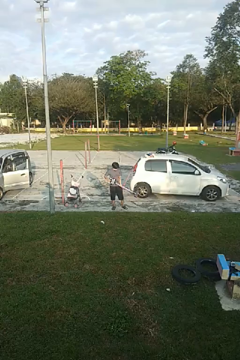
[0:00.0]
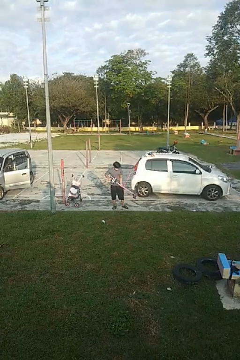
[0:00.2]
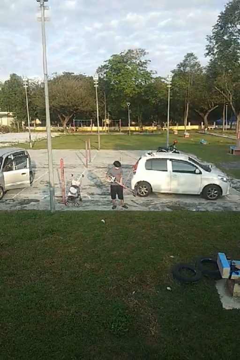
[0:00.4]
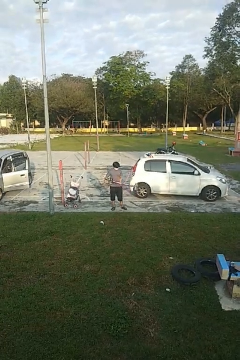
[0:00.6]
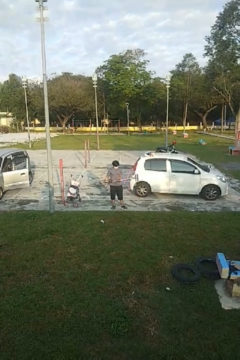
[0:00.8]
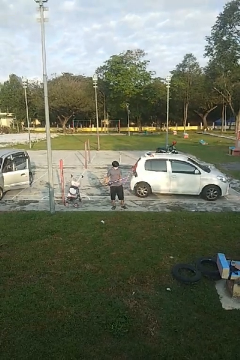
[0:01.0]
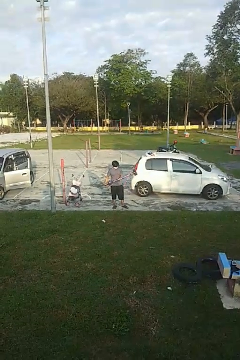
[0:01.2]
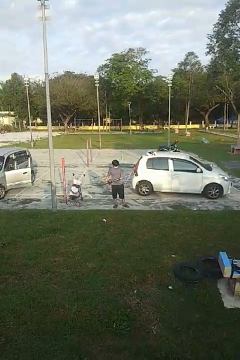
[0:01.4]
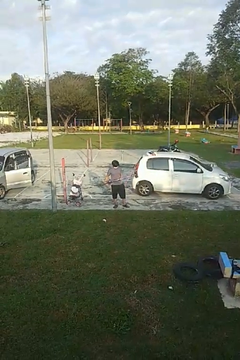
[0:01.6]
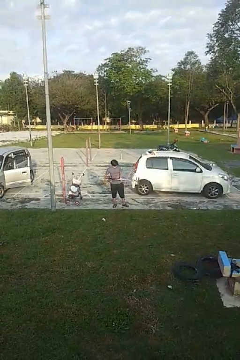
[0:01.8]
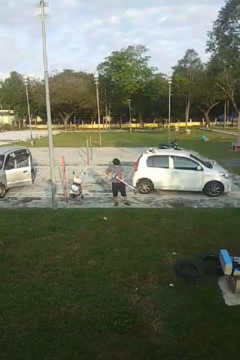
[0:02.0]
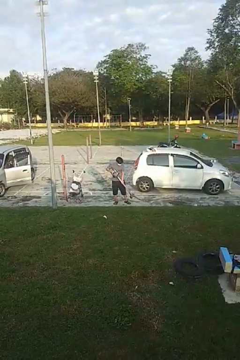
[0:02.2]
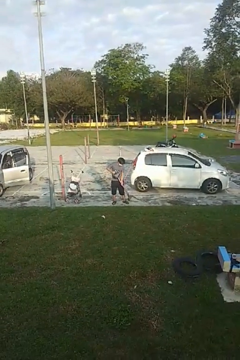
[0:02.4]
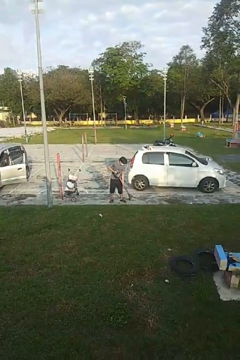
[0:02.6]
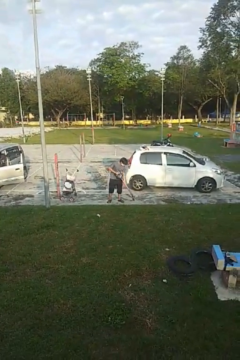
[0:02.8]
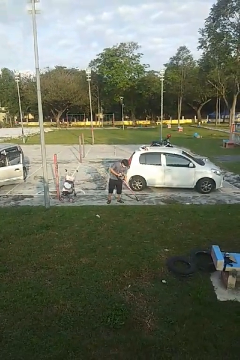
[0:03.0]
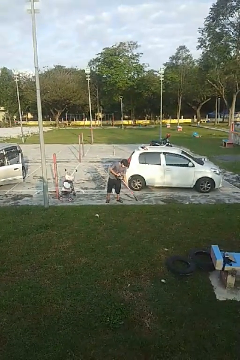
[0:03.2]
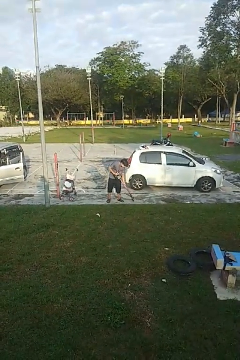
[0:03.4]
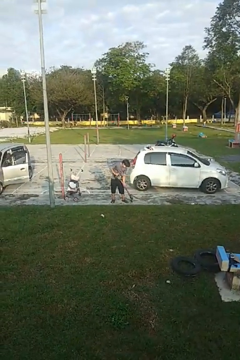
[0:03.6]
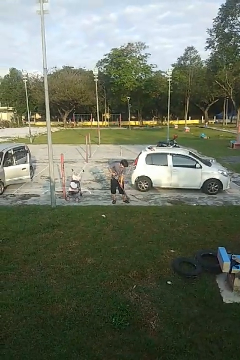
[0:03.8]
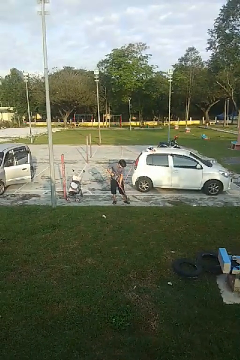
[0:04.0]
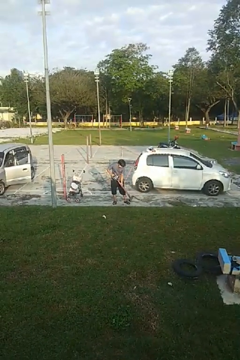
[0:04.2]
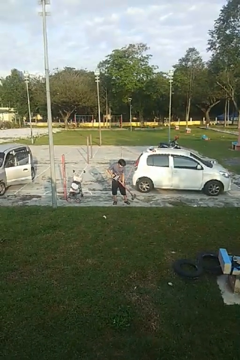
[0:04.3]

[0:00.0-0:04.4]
person vacuums carpet

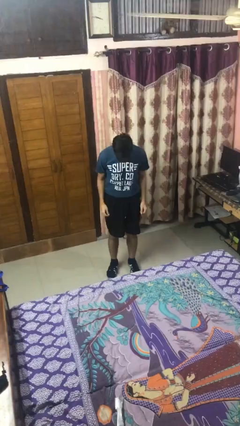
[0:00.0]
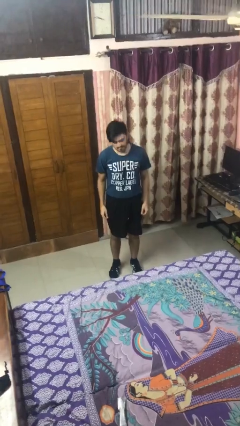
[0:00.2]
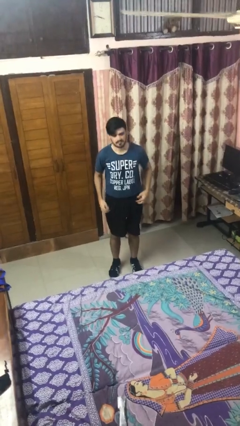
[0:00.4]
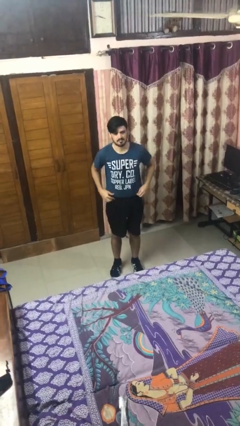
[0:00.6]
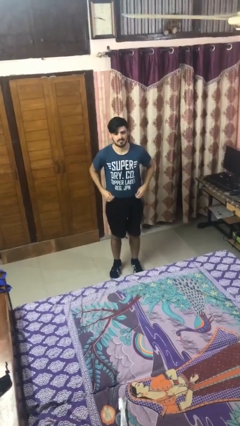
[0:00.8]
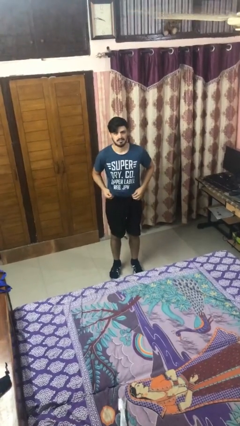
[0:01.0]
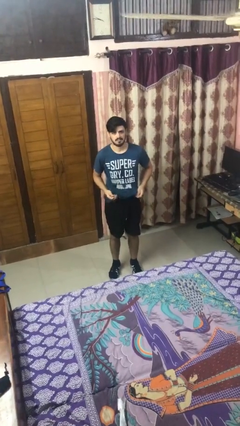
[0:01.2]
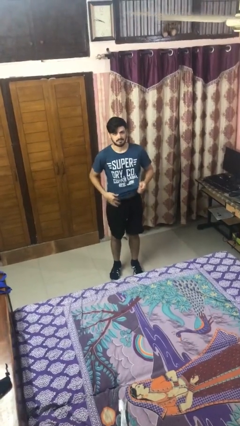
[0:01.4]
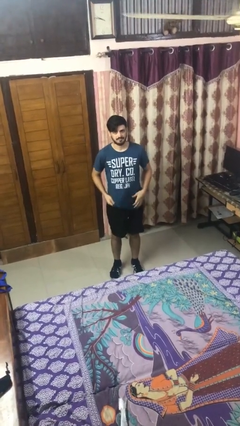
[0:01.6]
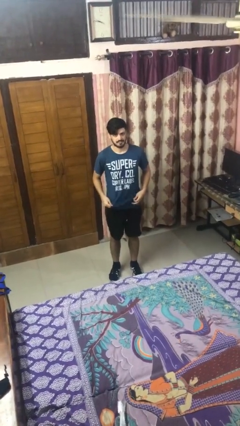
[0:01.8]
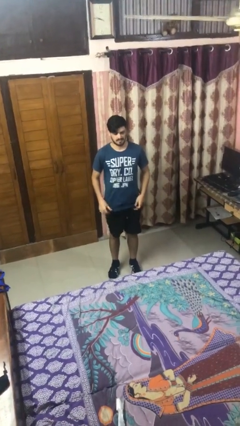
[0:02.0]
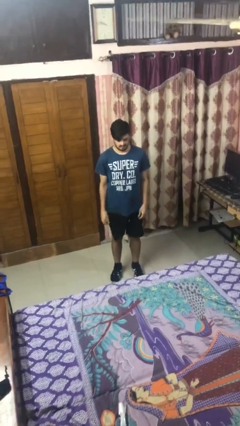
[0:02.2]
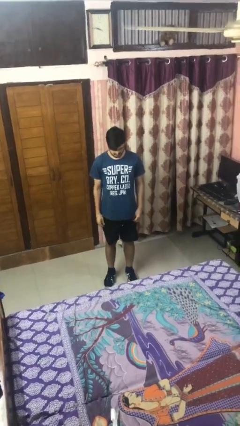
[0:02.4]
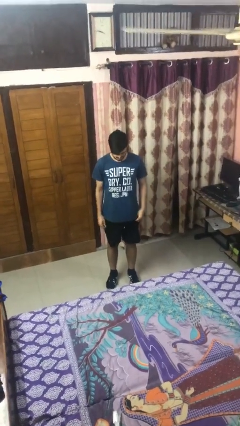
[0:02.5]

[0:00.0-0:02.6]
person untucks shirt

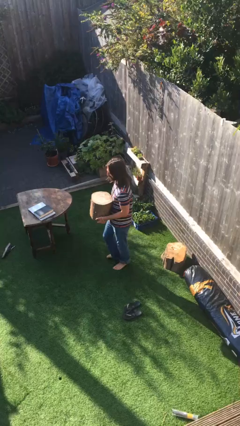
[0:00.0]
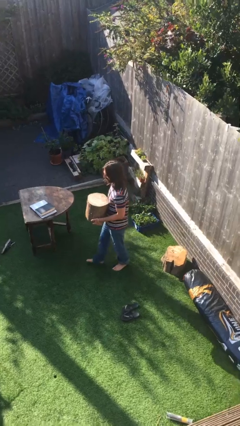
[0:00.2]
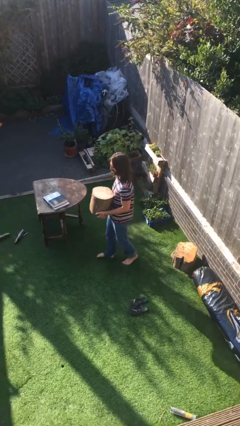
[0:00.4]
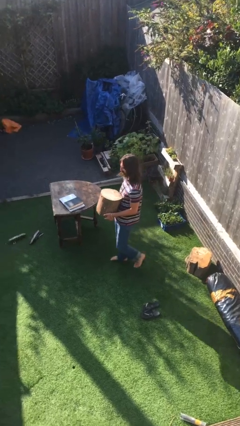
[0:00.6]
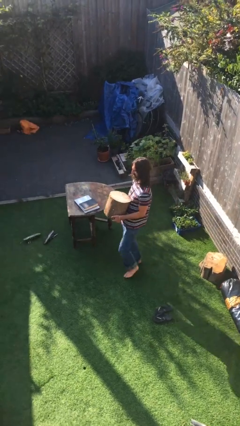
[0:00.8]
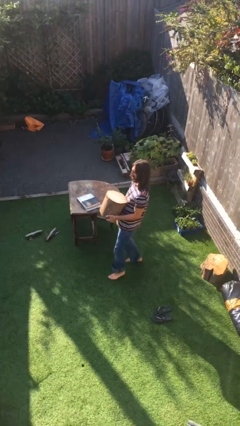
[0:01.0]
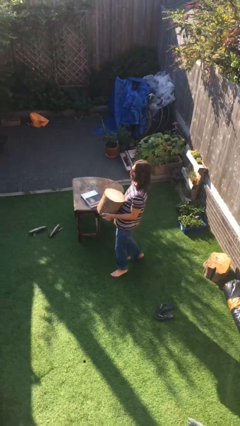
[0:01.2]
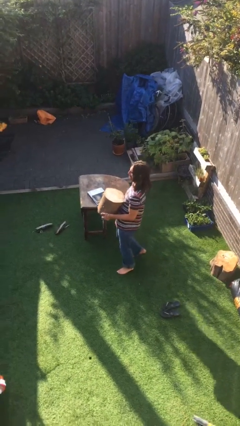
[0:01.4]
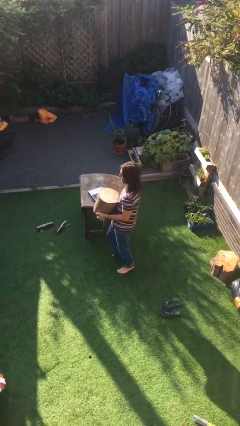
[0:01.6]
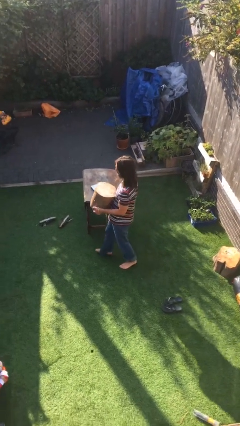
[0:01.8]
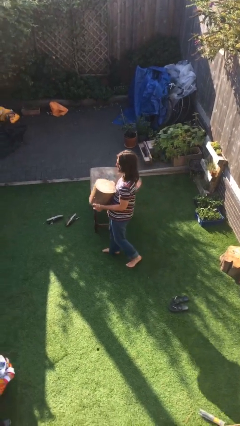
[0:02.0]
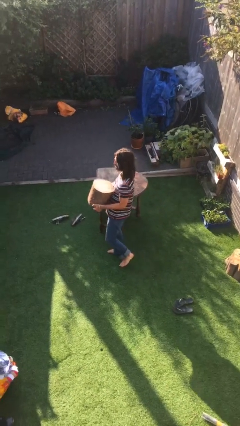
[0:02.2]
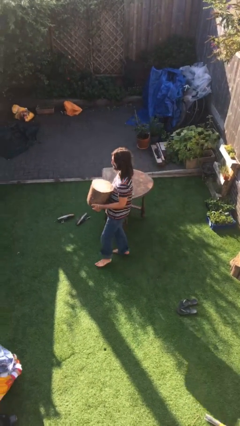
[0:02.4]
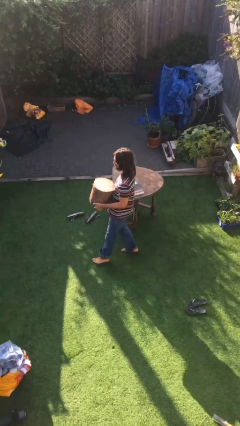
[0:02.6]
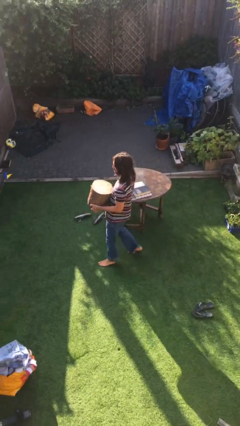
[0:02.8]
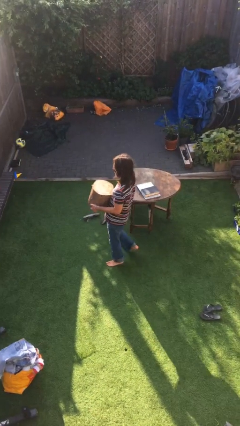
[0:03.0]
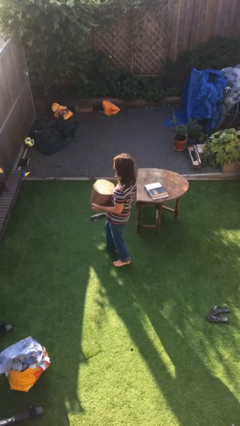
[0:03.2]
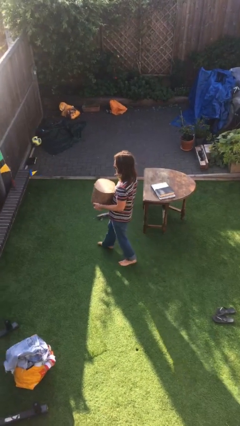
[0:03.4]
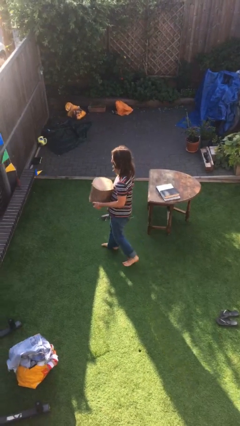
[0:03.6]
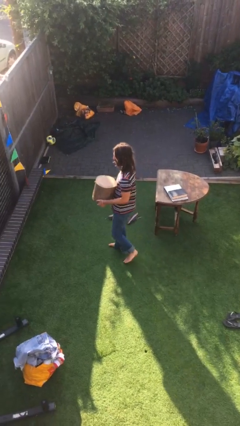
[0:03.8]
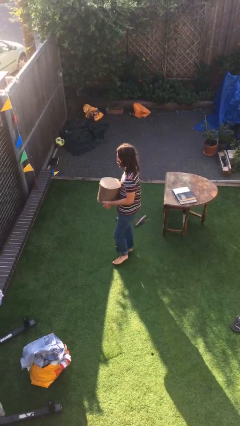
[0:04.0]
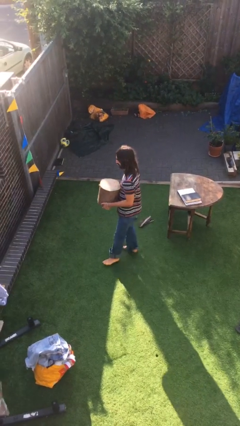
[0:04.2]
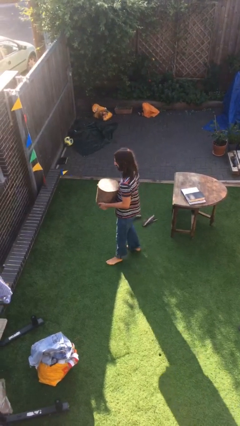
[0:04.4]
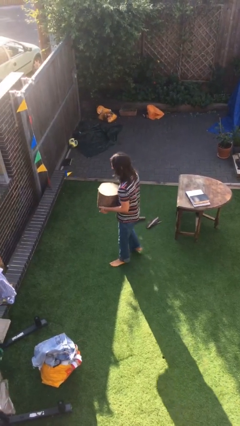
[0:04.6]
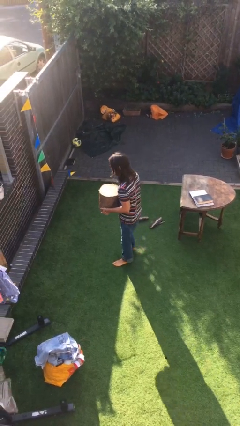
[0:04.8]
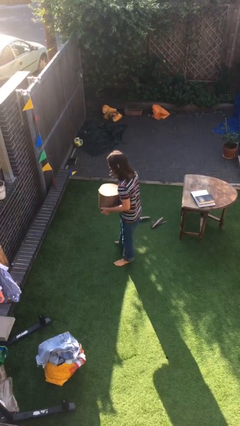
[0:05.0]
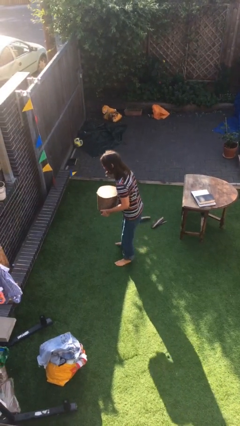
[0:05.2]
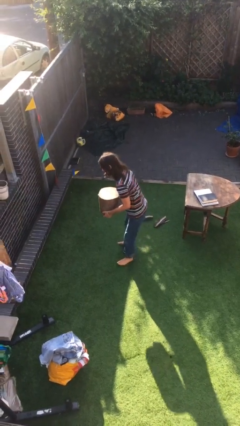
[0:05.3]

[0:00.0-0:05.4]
person carries heavy object

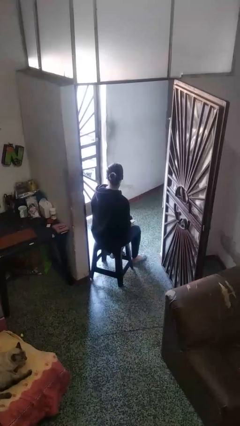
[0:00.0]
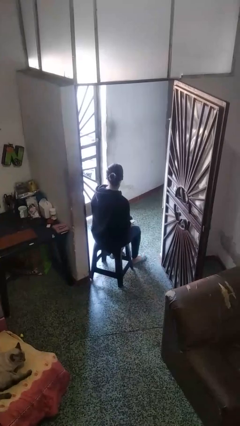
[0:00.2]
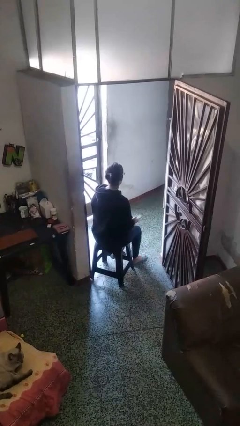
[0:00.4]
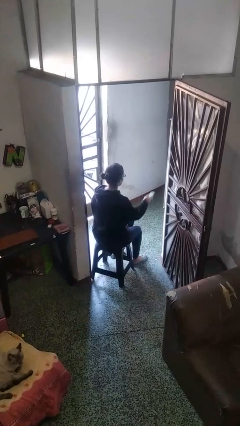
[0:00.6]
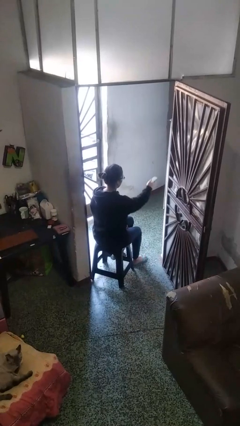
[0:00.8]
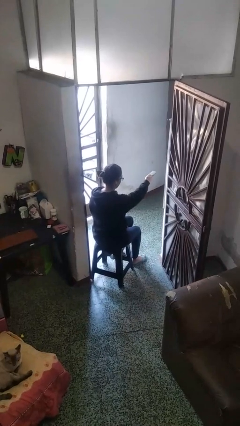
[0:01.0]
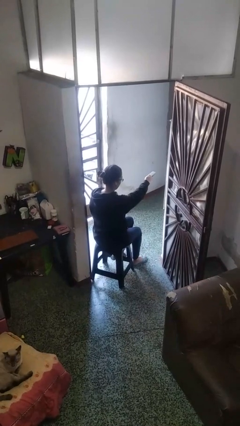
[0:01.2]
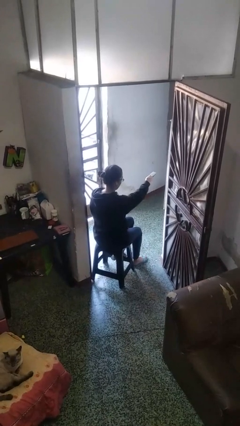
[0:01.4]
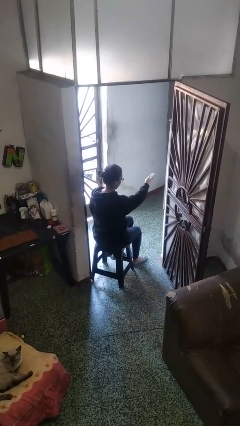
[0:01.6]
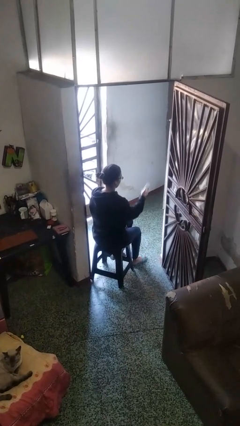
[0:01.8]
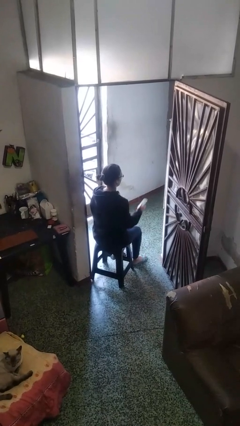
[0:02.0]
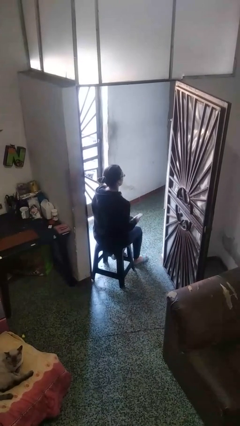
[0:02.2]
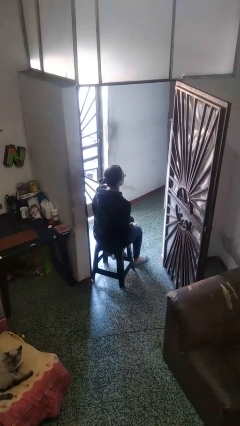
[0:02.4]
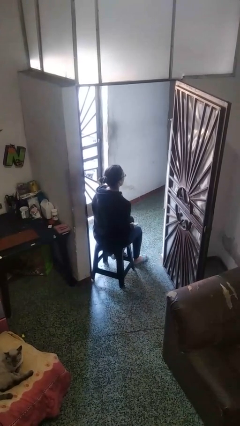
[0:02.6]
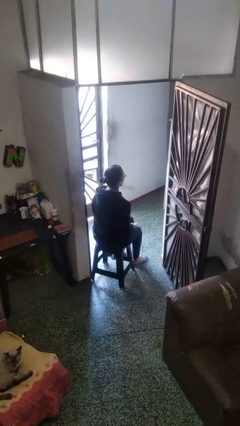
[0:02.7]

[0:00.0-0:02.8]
person uses television remote

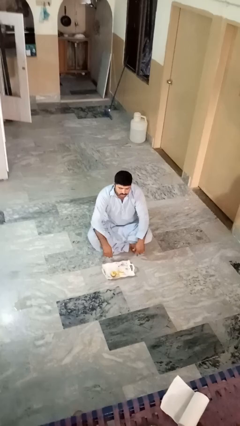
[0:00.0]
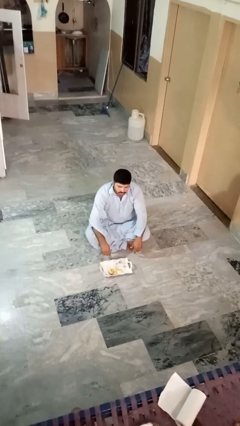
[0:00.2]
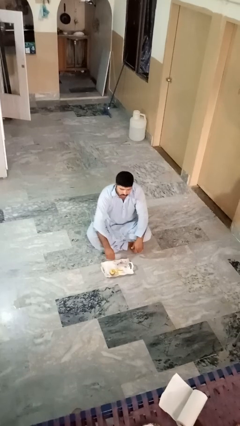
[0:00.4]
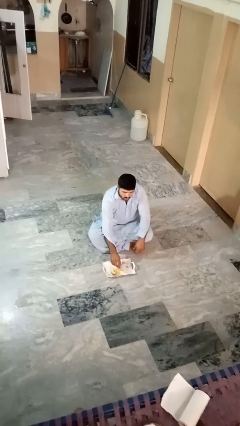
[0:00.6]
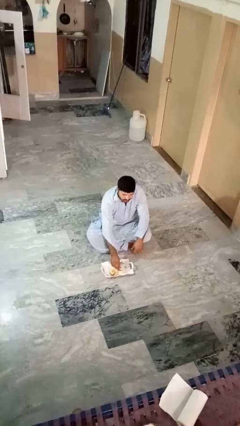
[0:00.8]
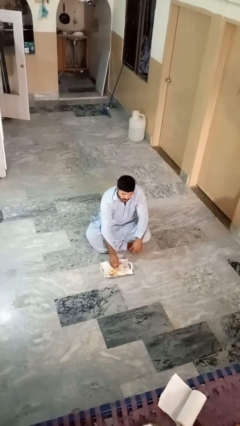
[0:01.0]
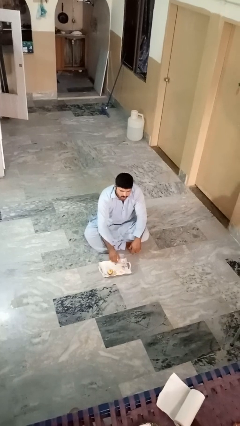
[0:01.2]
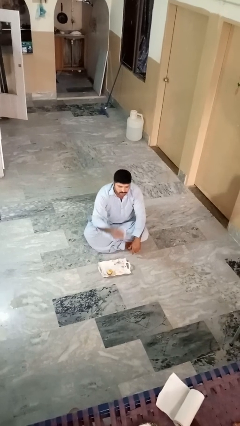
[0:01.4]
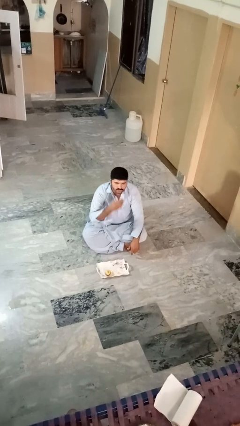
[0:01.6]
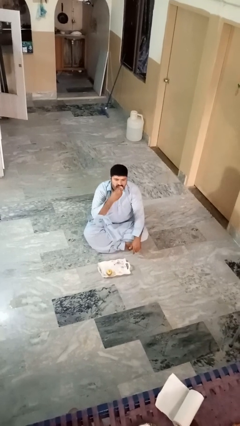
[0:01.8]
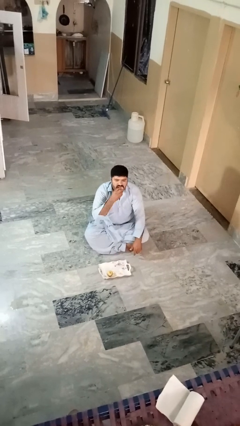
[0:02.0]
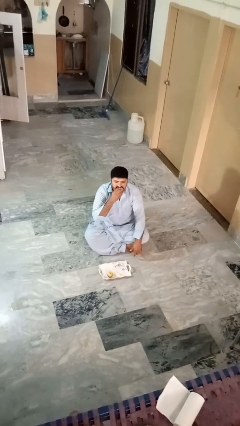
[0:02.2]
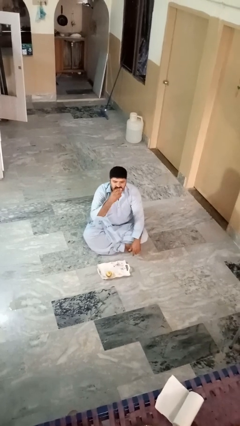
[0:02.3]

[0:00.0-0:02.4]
person eats apple

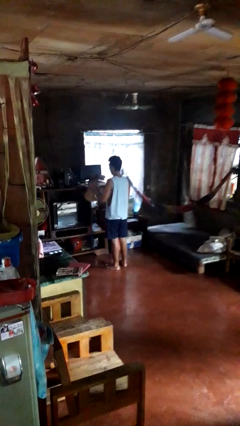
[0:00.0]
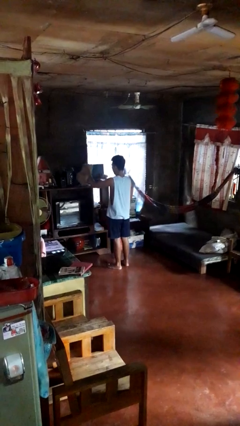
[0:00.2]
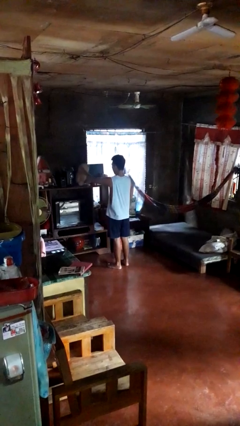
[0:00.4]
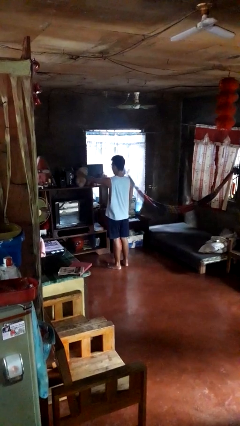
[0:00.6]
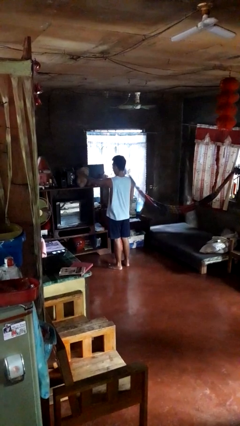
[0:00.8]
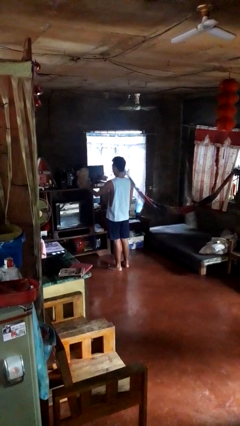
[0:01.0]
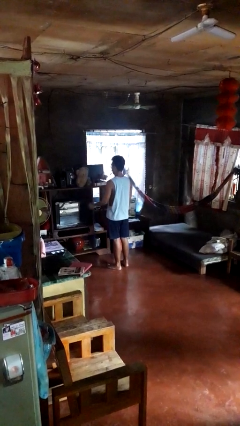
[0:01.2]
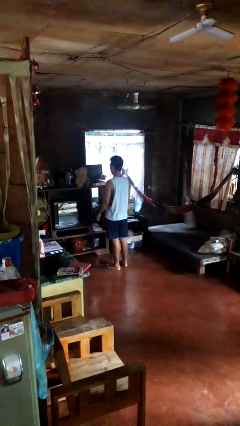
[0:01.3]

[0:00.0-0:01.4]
person puts down object on shelf
